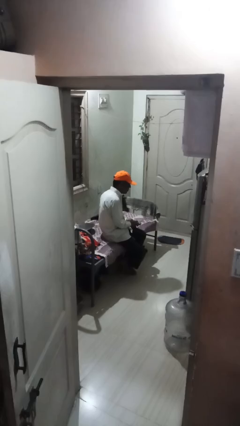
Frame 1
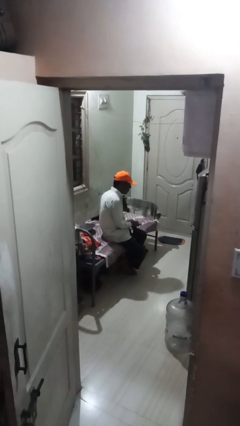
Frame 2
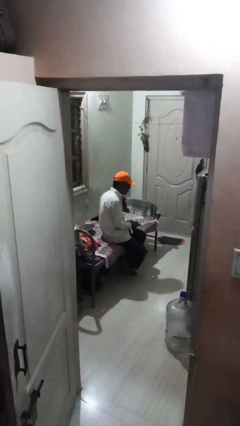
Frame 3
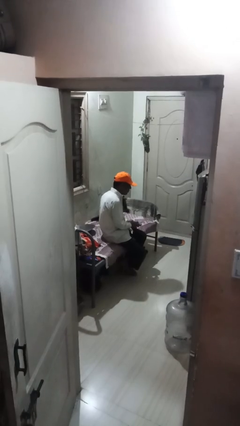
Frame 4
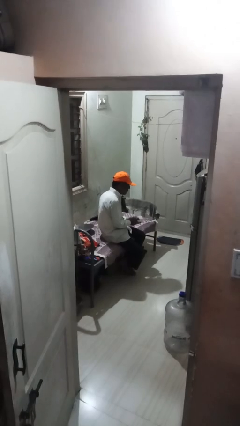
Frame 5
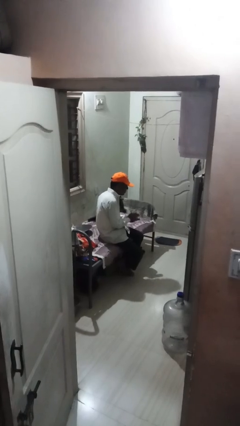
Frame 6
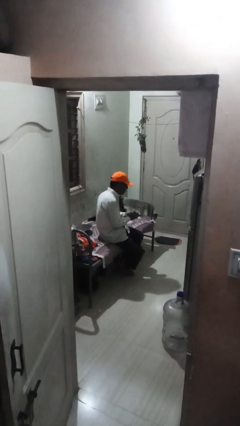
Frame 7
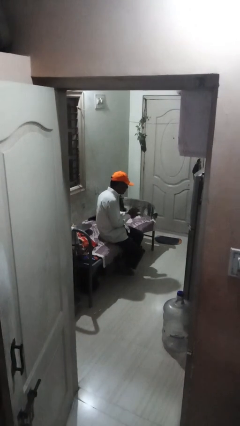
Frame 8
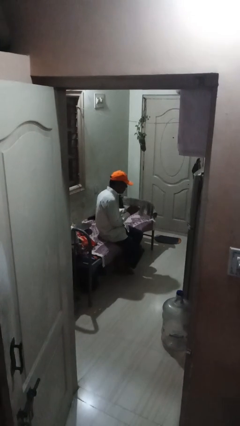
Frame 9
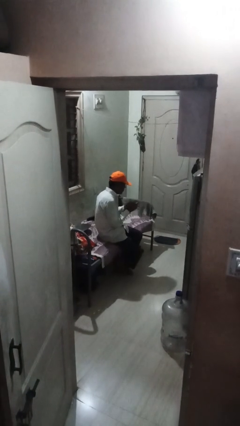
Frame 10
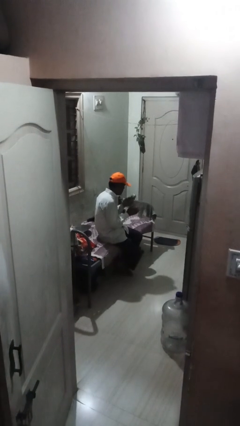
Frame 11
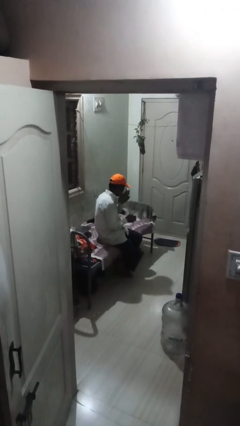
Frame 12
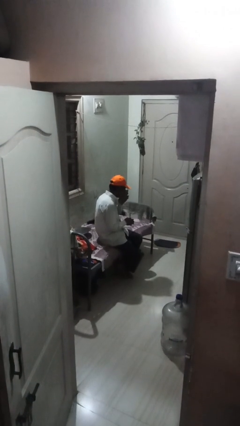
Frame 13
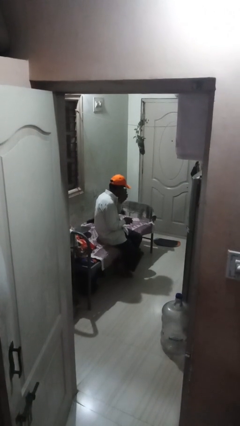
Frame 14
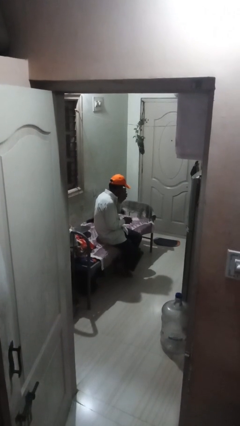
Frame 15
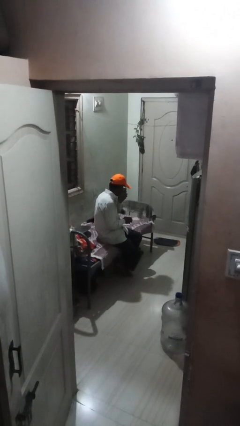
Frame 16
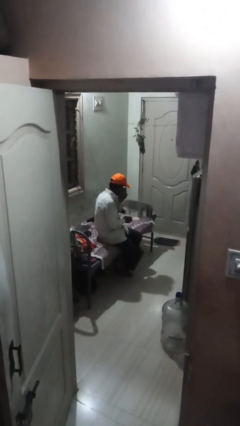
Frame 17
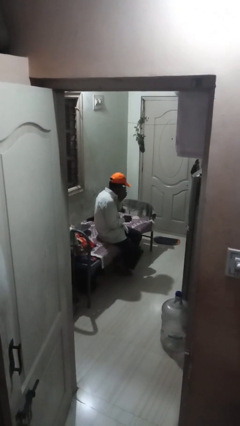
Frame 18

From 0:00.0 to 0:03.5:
person taps object with finger

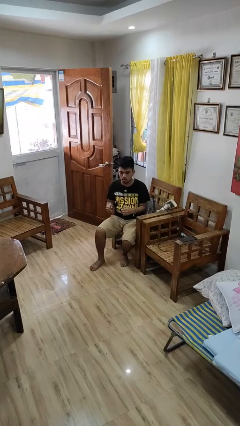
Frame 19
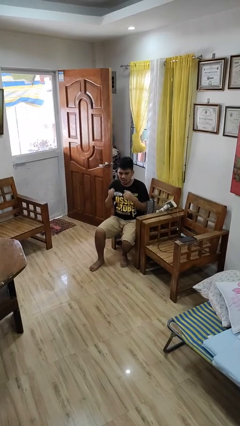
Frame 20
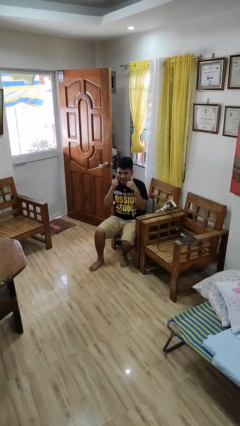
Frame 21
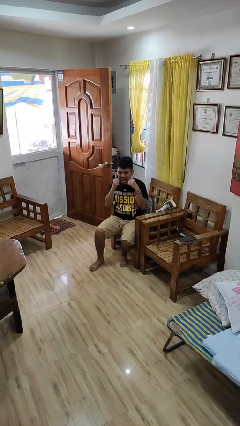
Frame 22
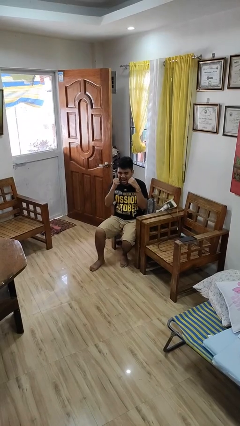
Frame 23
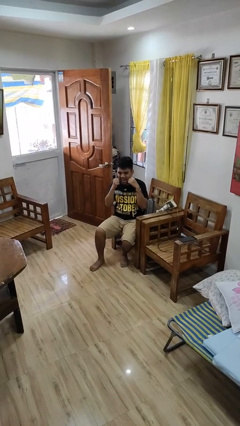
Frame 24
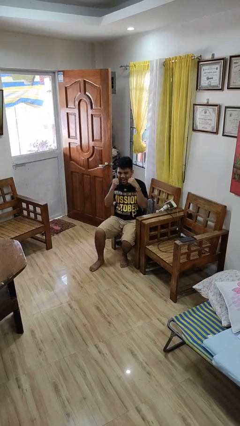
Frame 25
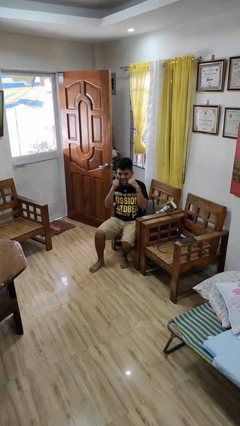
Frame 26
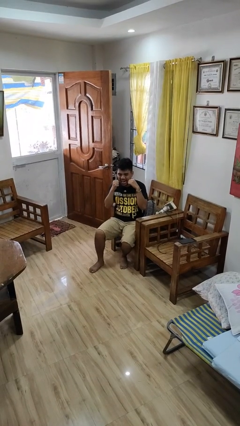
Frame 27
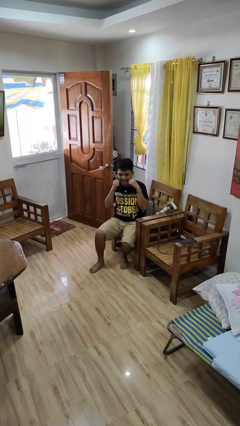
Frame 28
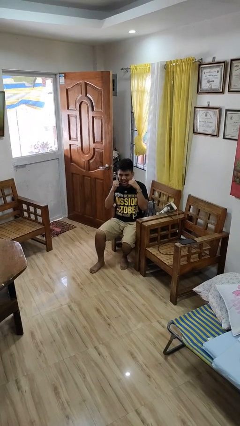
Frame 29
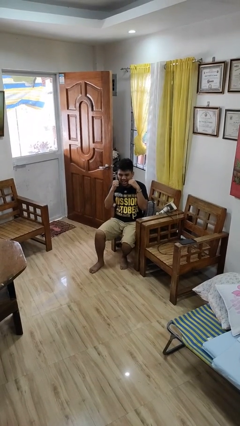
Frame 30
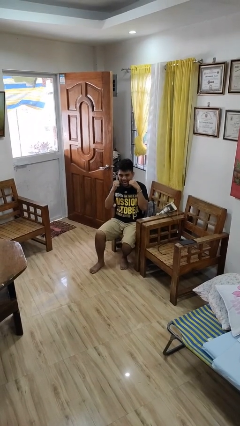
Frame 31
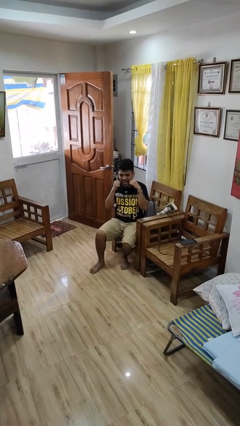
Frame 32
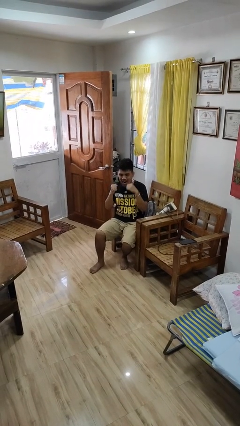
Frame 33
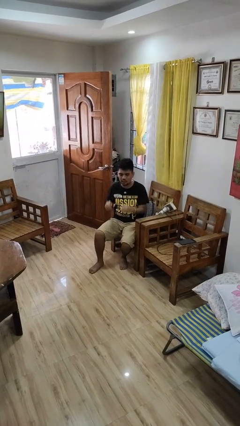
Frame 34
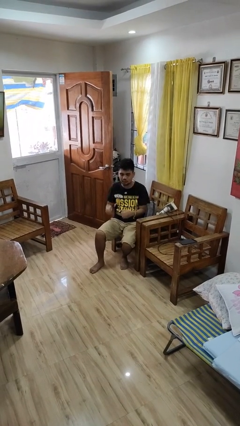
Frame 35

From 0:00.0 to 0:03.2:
person flosses

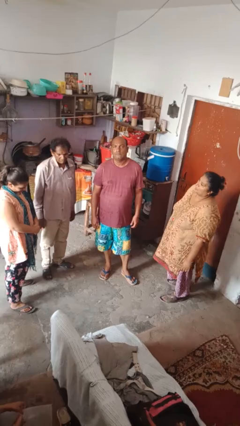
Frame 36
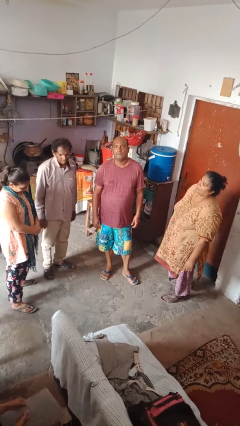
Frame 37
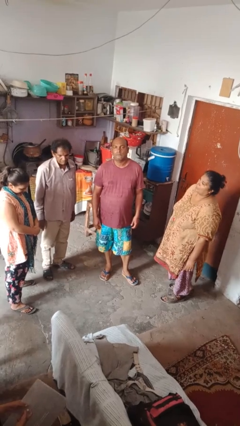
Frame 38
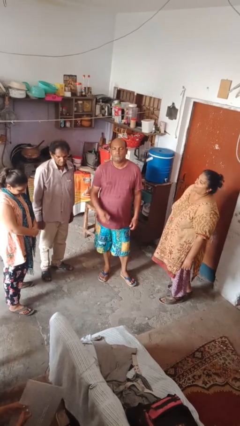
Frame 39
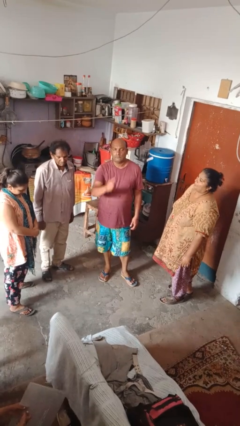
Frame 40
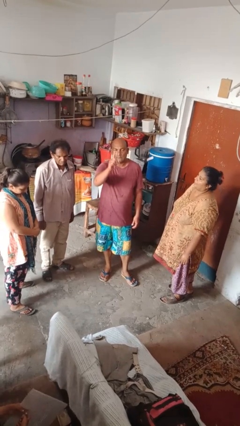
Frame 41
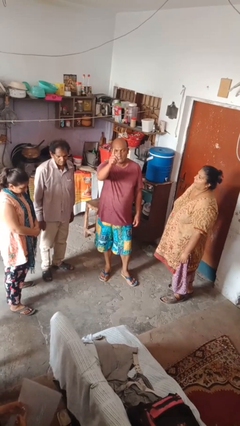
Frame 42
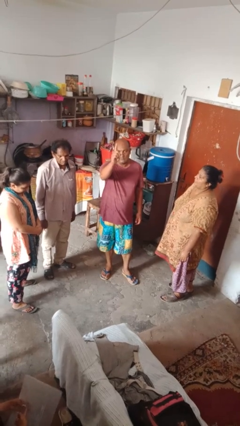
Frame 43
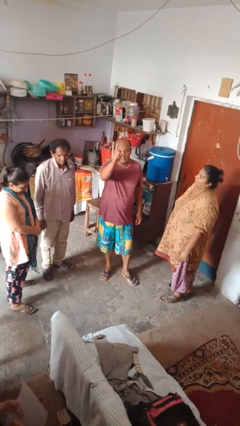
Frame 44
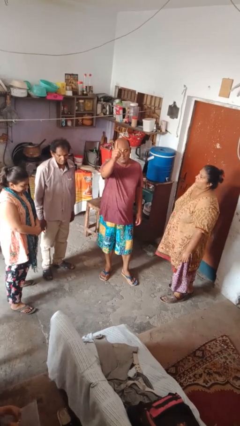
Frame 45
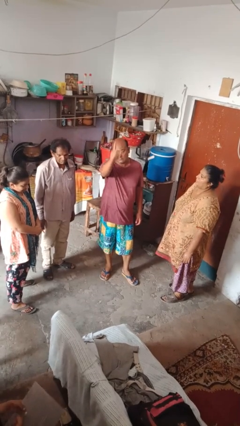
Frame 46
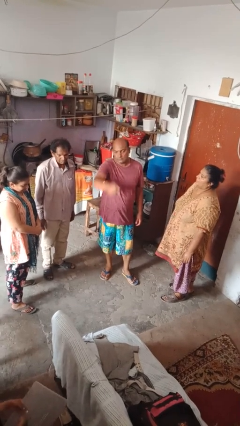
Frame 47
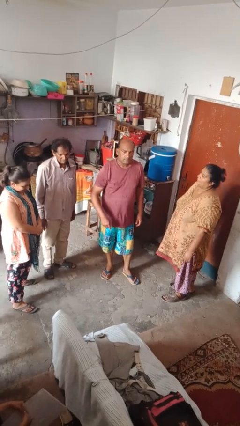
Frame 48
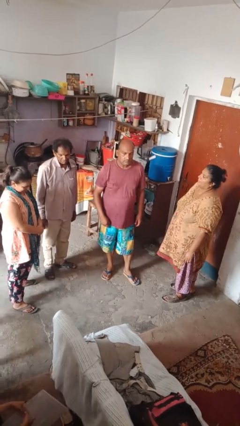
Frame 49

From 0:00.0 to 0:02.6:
person points at person

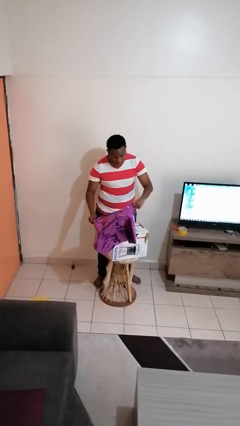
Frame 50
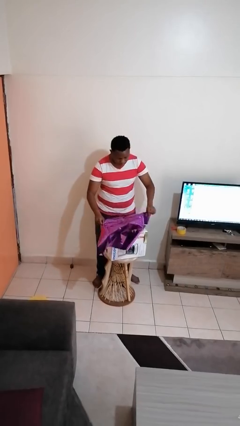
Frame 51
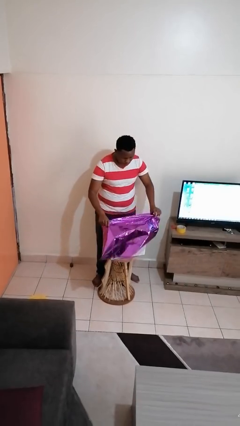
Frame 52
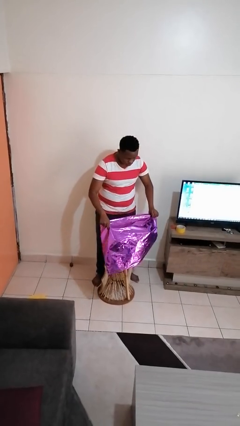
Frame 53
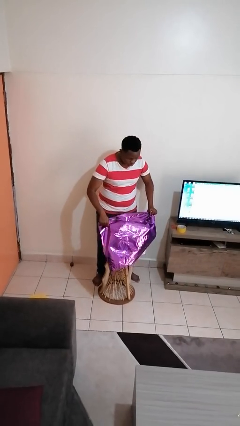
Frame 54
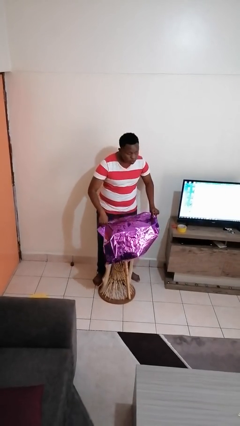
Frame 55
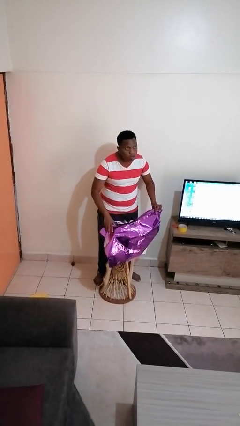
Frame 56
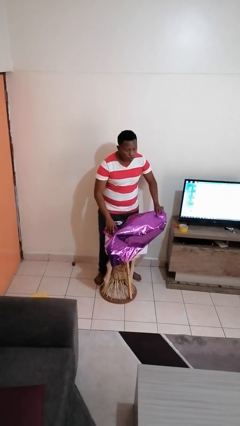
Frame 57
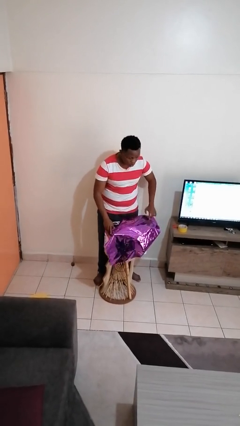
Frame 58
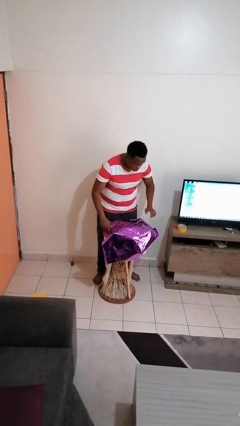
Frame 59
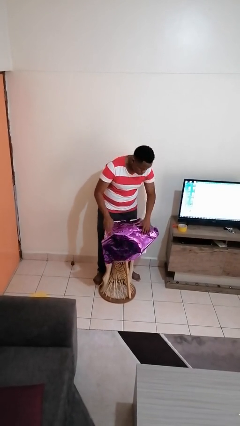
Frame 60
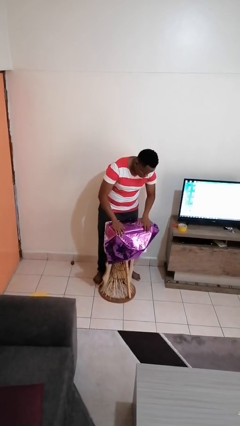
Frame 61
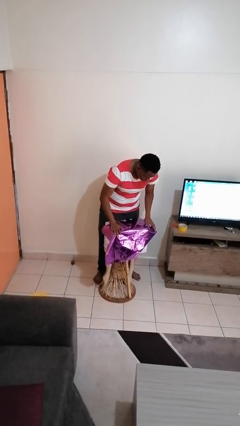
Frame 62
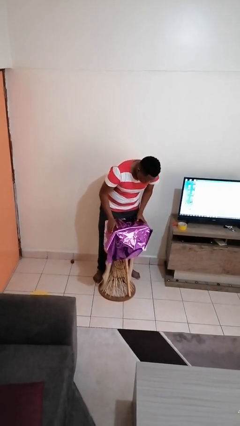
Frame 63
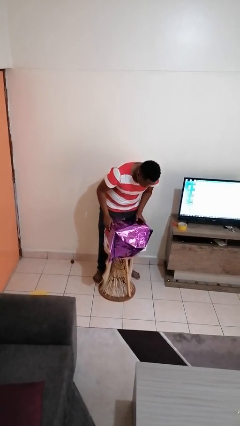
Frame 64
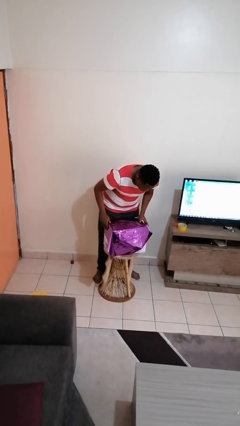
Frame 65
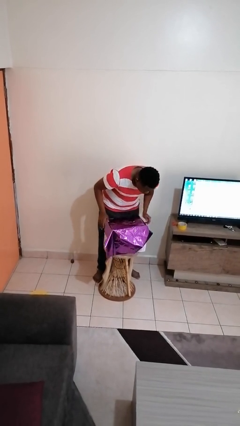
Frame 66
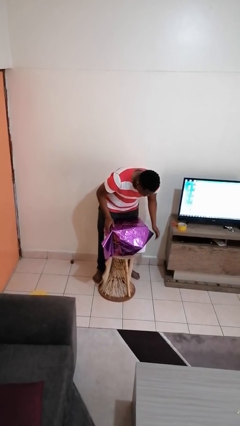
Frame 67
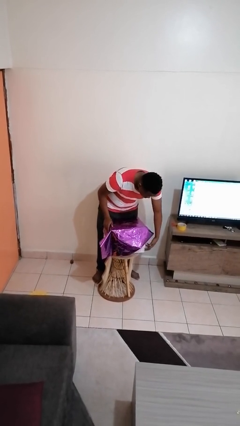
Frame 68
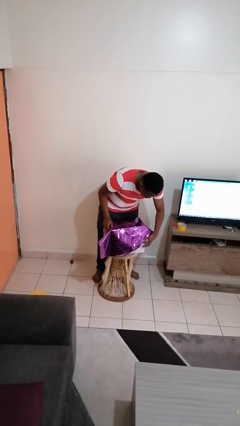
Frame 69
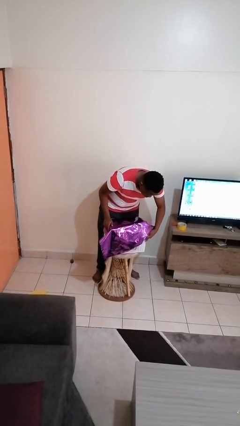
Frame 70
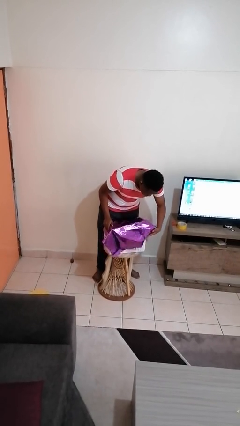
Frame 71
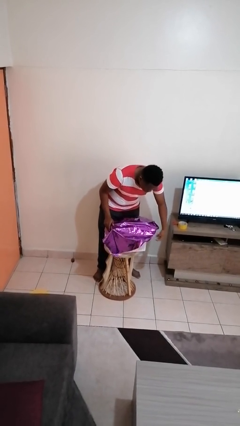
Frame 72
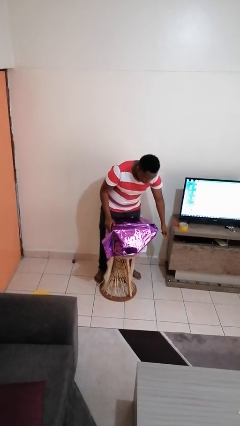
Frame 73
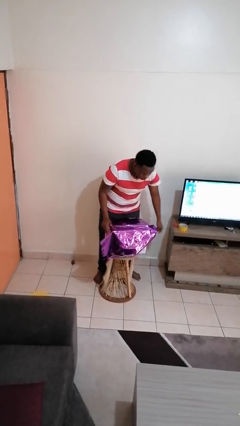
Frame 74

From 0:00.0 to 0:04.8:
person wraps box

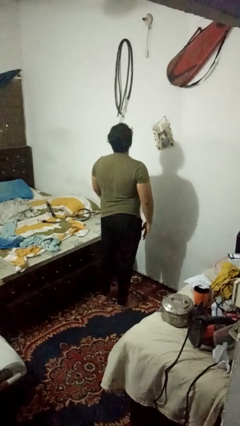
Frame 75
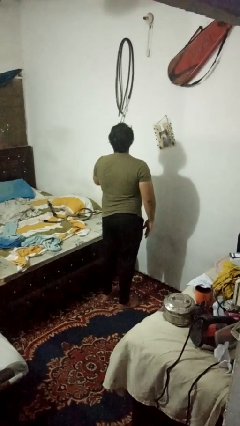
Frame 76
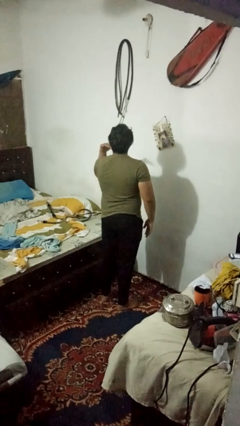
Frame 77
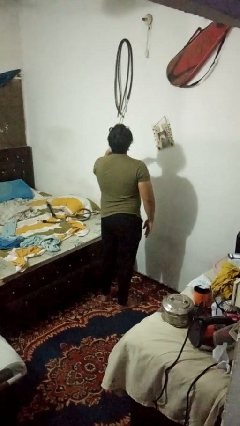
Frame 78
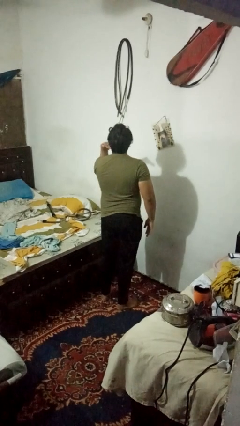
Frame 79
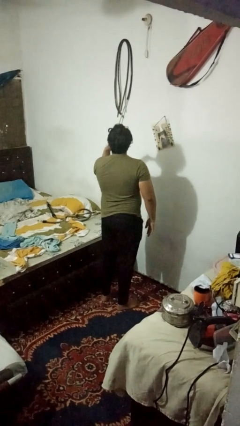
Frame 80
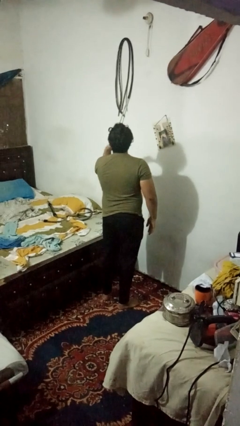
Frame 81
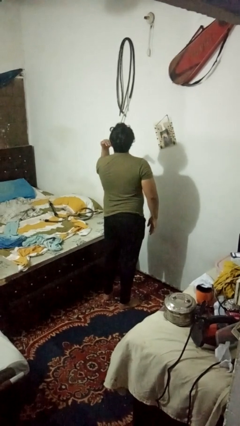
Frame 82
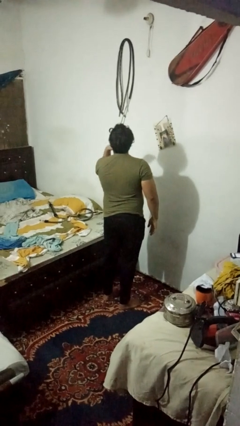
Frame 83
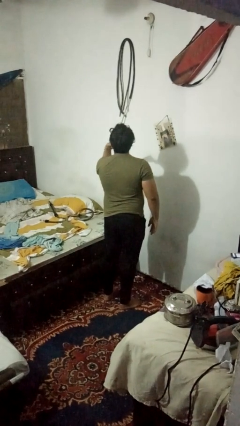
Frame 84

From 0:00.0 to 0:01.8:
person gestures cut

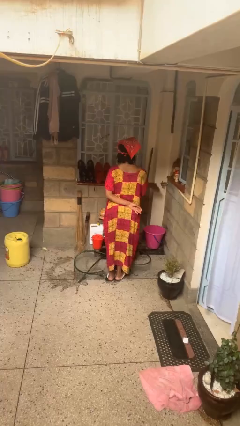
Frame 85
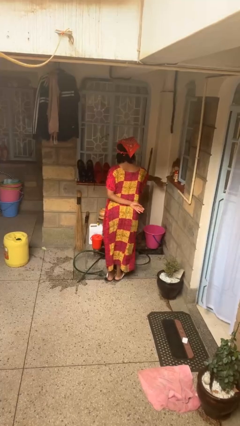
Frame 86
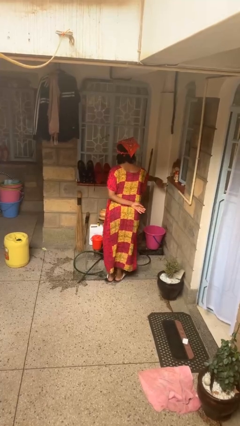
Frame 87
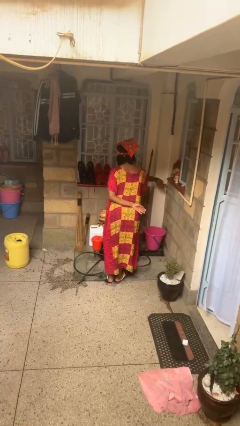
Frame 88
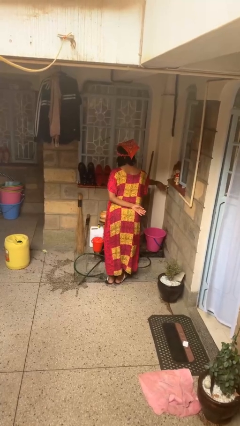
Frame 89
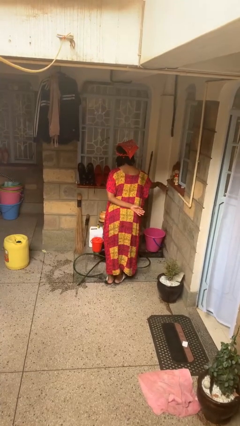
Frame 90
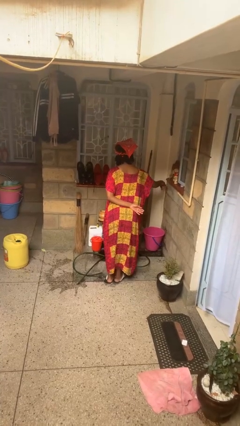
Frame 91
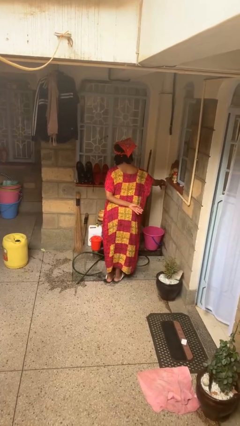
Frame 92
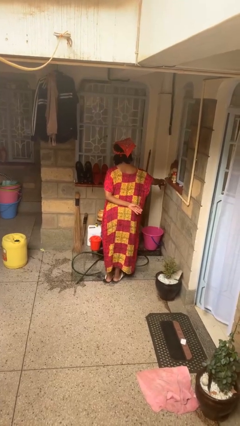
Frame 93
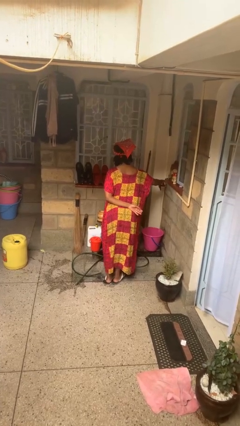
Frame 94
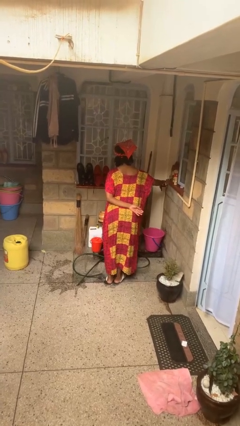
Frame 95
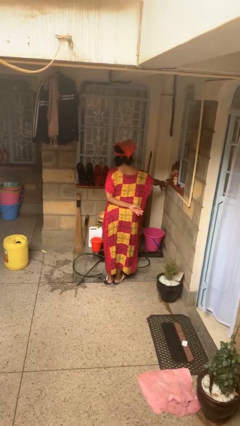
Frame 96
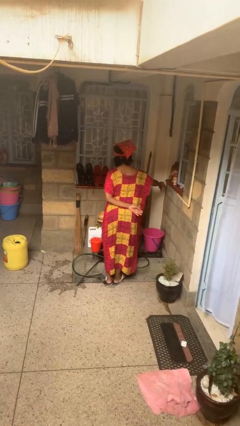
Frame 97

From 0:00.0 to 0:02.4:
person turns on faucet
